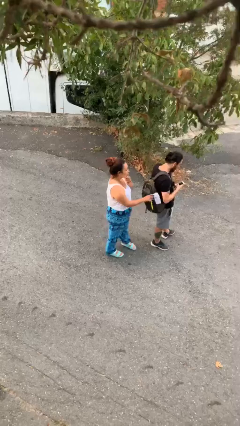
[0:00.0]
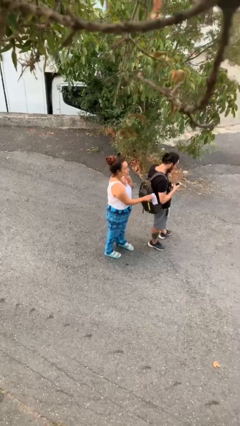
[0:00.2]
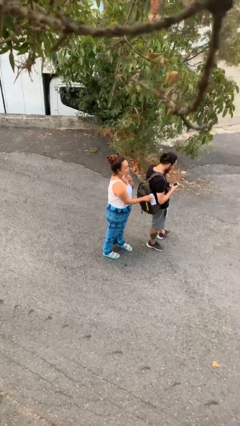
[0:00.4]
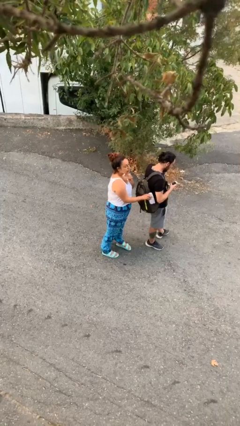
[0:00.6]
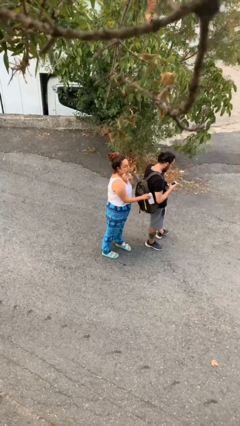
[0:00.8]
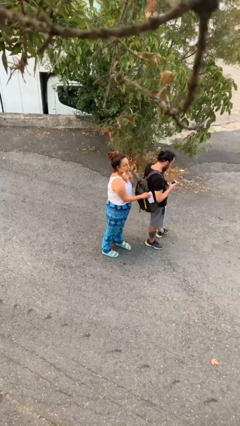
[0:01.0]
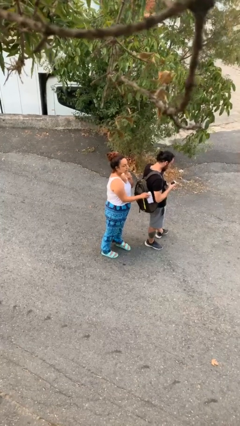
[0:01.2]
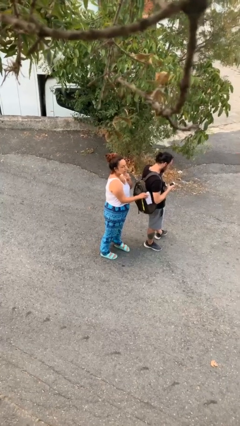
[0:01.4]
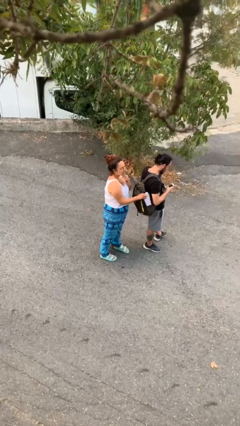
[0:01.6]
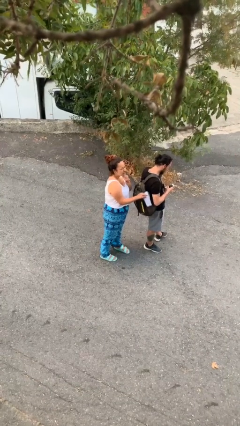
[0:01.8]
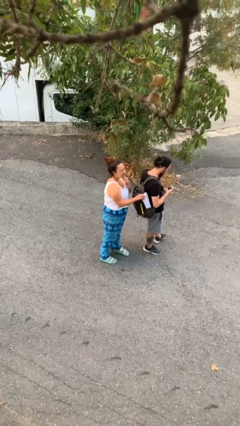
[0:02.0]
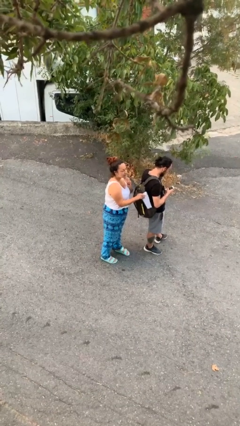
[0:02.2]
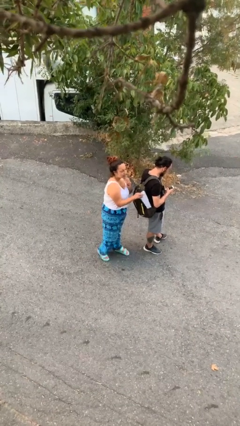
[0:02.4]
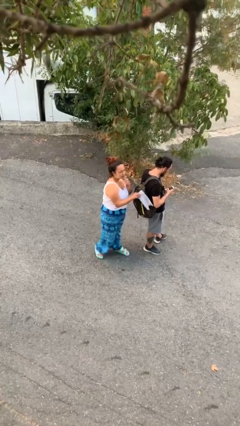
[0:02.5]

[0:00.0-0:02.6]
person steals object from person

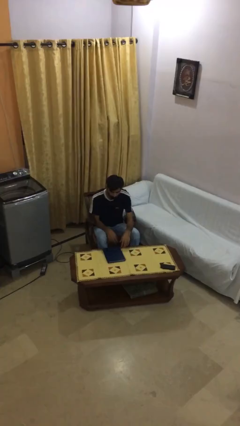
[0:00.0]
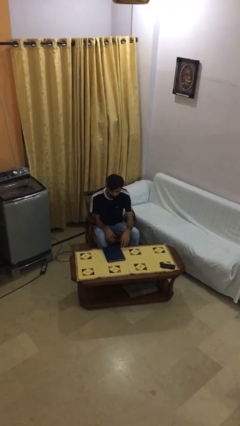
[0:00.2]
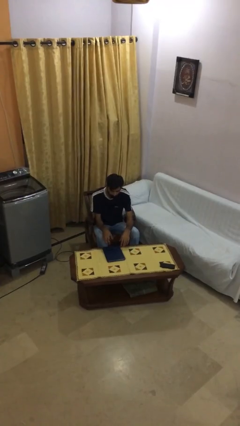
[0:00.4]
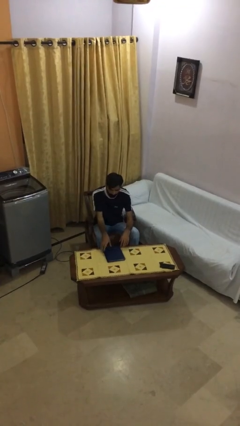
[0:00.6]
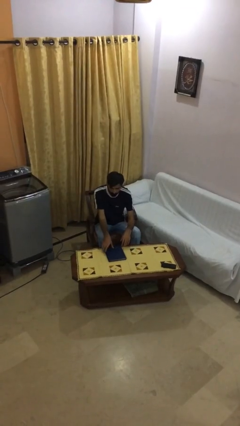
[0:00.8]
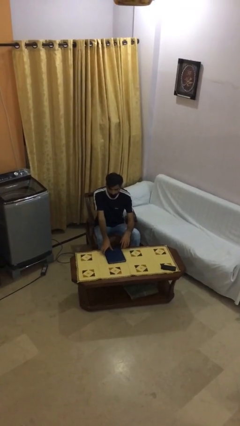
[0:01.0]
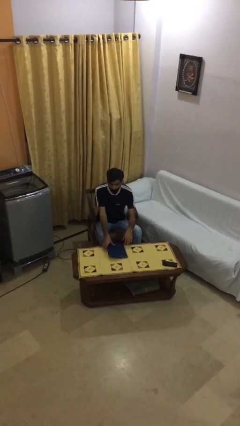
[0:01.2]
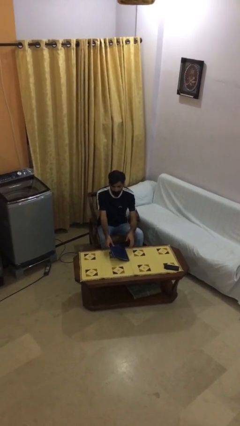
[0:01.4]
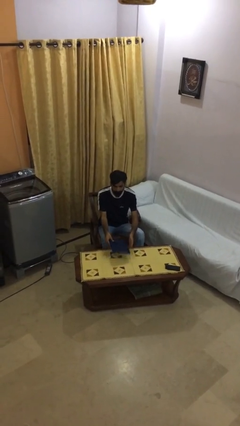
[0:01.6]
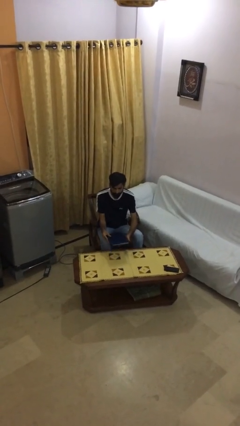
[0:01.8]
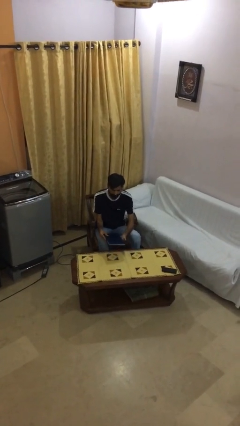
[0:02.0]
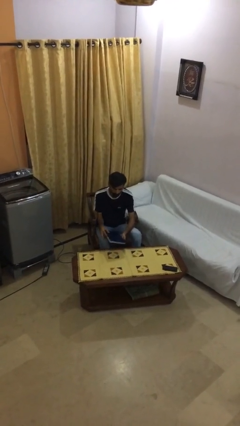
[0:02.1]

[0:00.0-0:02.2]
person picks up object from table

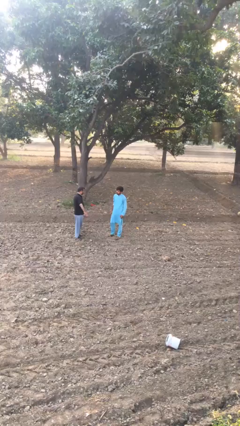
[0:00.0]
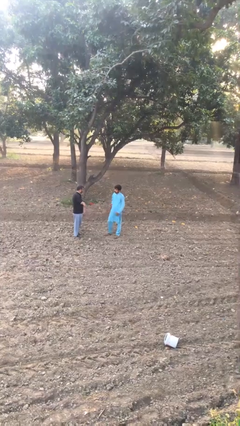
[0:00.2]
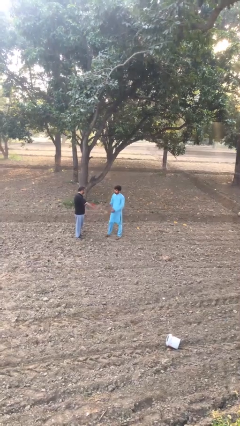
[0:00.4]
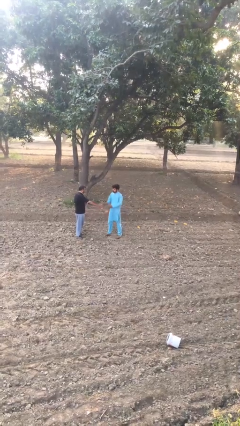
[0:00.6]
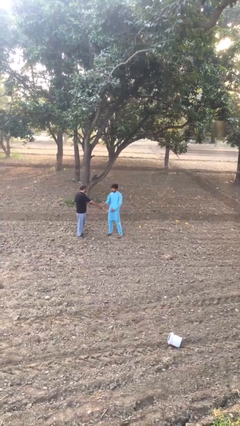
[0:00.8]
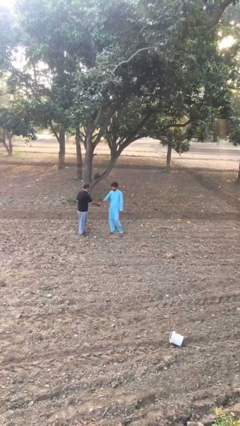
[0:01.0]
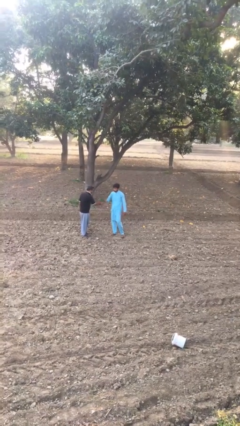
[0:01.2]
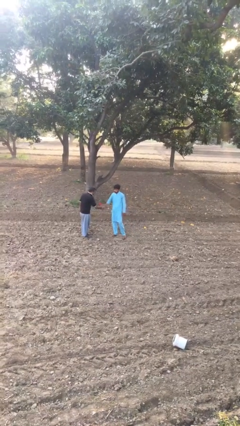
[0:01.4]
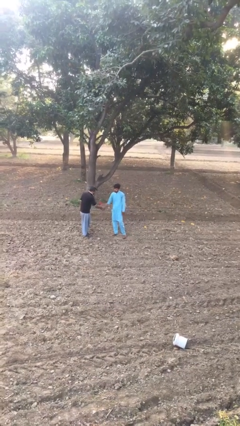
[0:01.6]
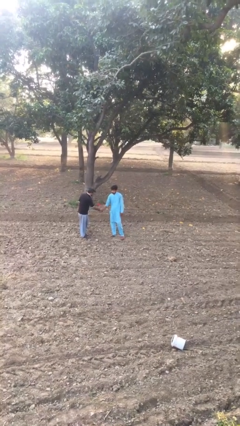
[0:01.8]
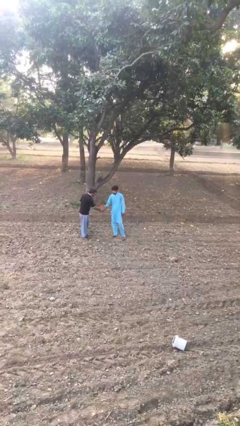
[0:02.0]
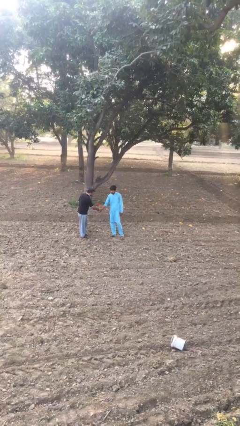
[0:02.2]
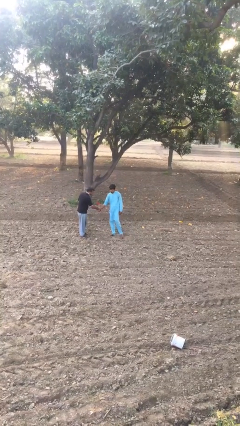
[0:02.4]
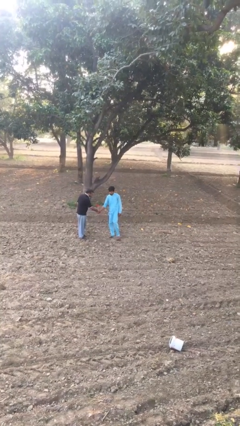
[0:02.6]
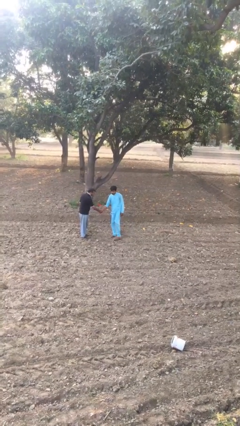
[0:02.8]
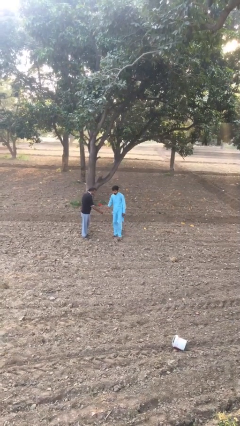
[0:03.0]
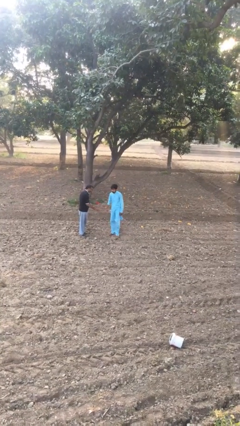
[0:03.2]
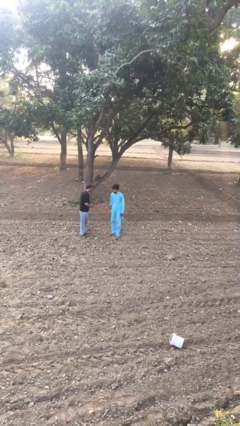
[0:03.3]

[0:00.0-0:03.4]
person shakes hand

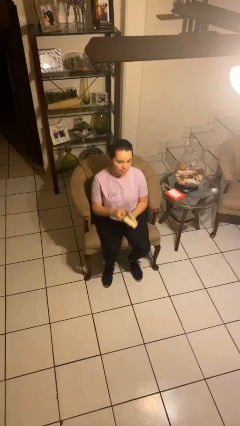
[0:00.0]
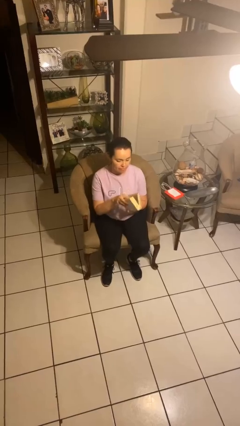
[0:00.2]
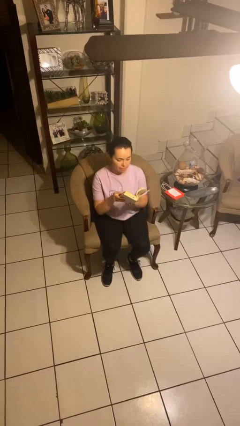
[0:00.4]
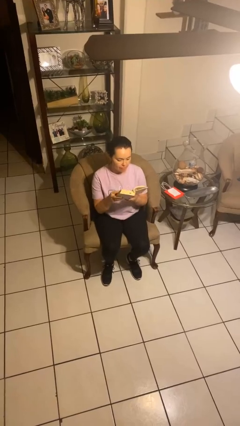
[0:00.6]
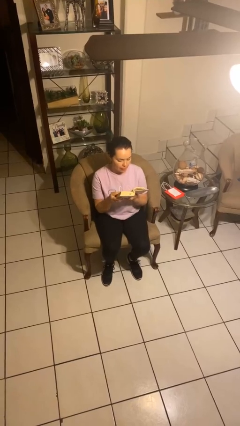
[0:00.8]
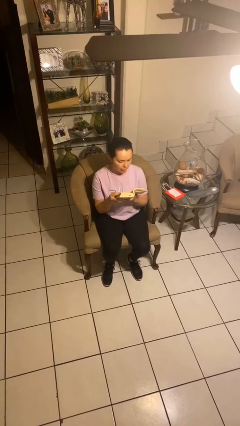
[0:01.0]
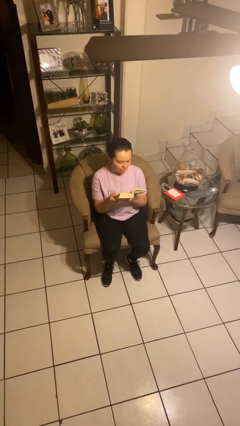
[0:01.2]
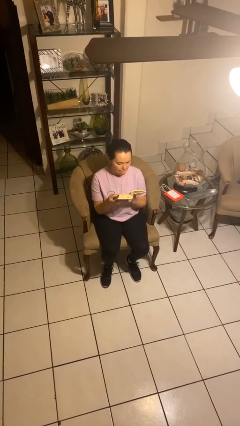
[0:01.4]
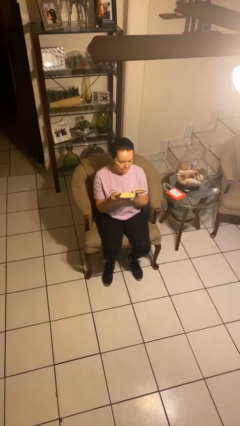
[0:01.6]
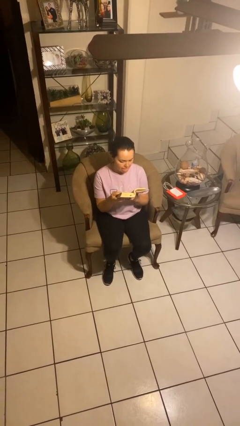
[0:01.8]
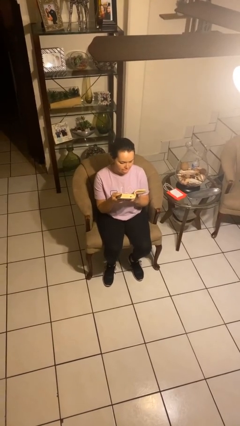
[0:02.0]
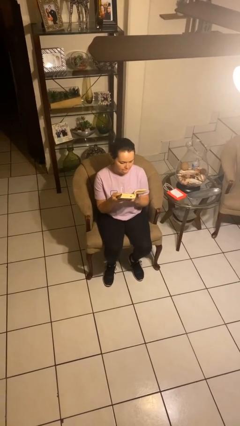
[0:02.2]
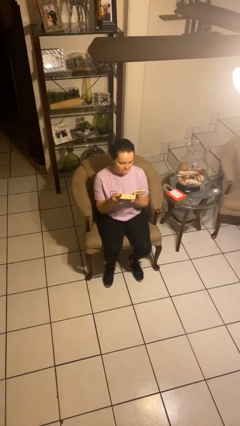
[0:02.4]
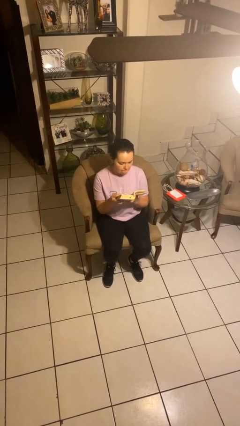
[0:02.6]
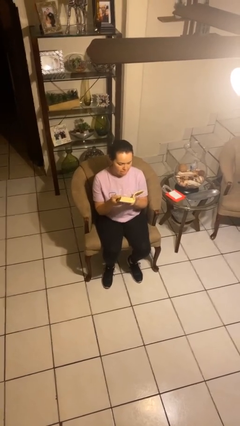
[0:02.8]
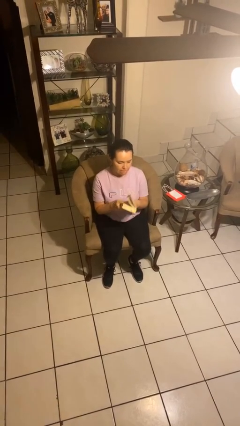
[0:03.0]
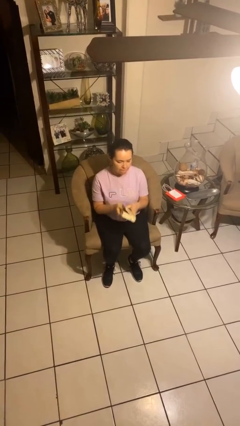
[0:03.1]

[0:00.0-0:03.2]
person reads book

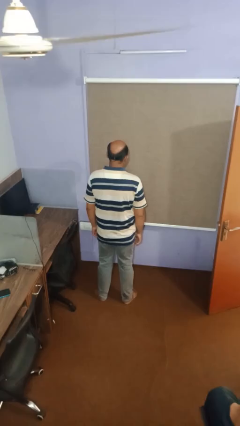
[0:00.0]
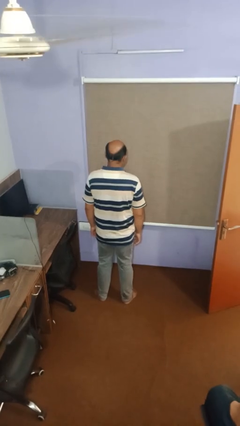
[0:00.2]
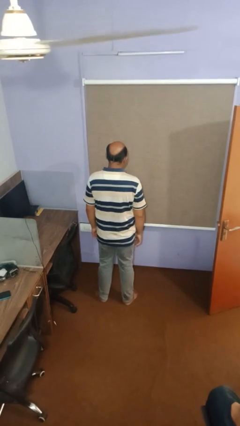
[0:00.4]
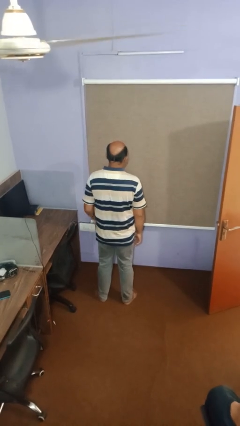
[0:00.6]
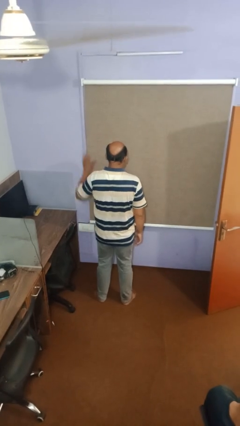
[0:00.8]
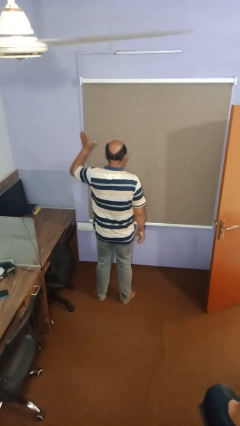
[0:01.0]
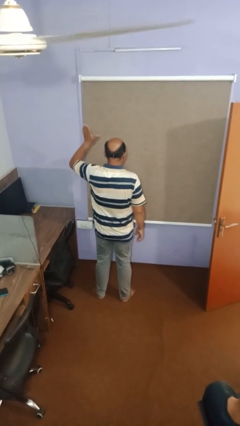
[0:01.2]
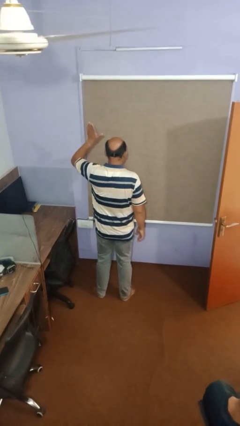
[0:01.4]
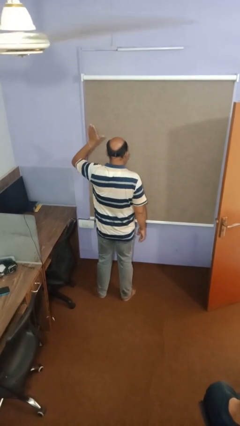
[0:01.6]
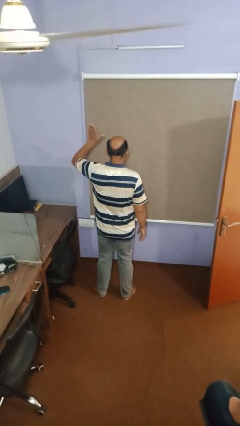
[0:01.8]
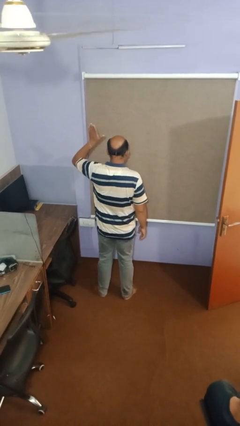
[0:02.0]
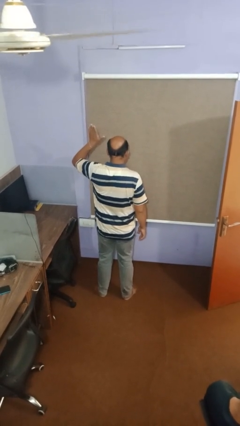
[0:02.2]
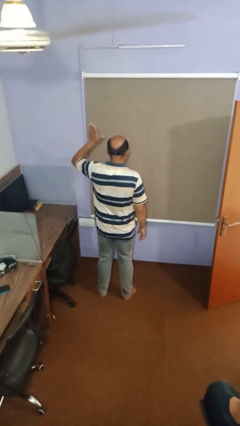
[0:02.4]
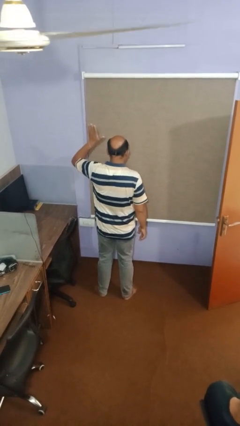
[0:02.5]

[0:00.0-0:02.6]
person gestures raise hand

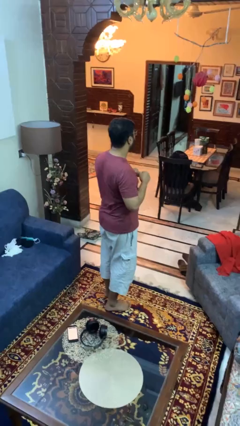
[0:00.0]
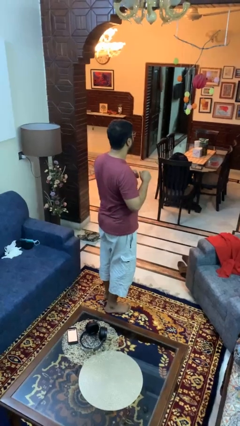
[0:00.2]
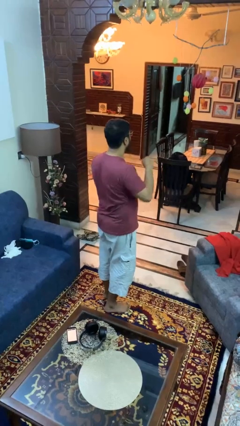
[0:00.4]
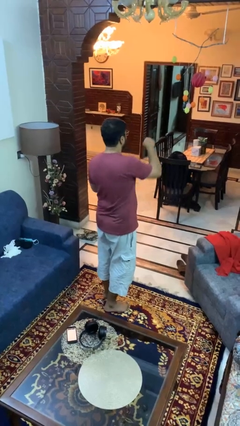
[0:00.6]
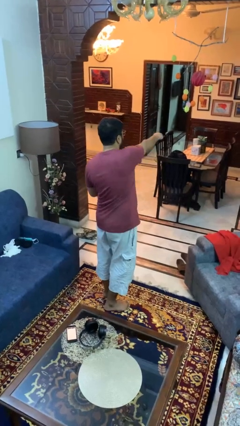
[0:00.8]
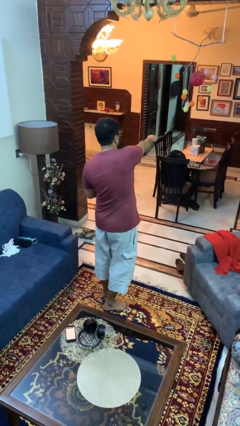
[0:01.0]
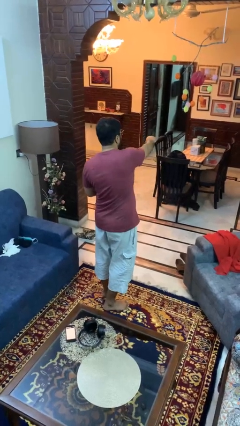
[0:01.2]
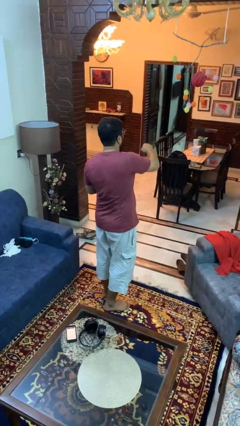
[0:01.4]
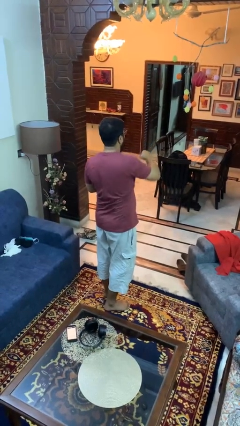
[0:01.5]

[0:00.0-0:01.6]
person karate chop

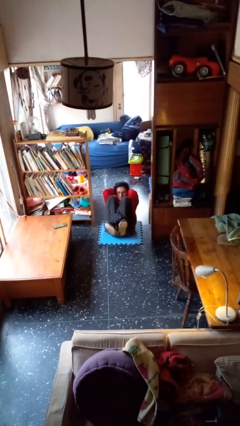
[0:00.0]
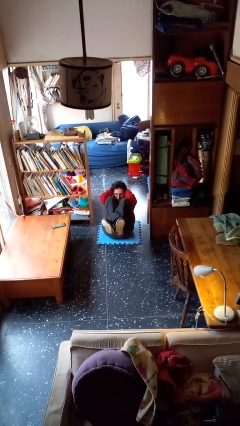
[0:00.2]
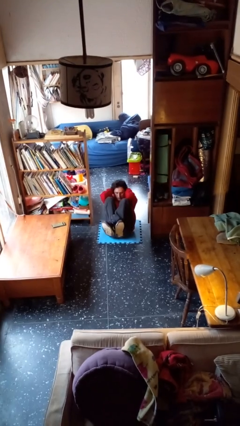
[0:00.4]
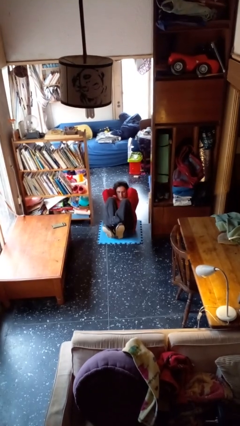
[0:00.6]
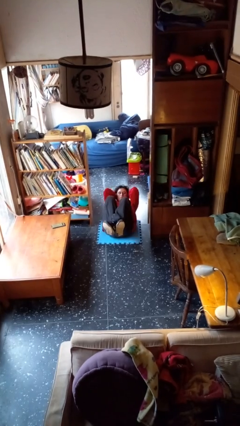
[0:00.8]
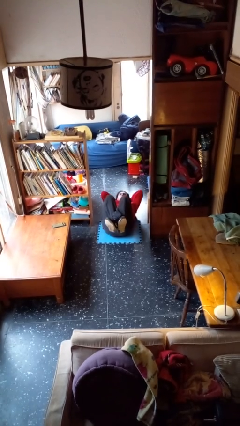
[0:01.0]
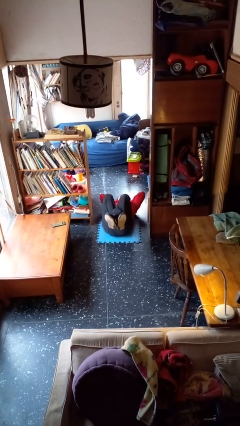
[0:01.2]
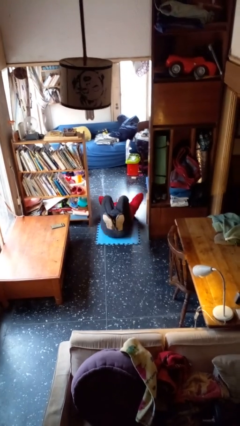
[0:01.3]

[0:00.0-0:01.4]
person exercises with situp
